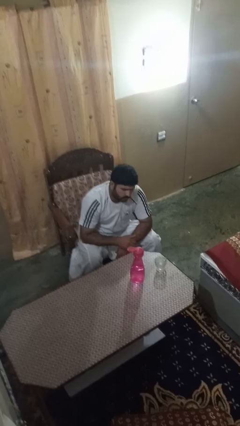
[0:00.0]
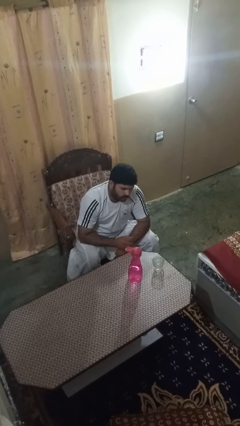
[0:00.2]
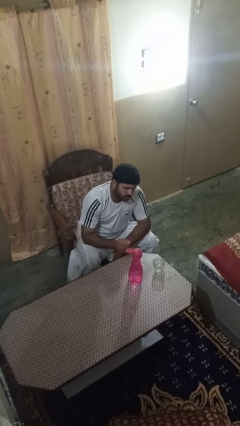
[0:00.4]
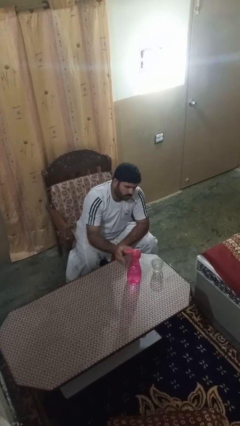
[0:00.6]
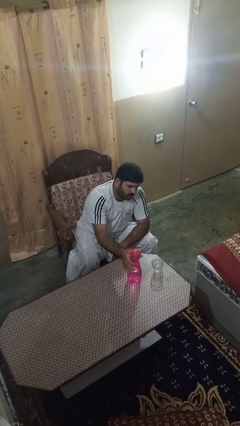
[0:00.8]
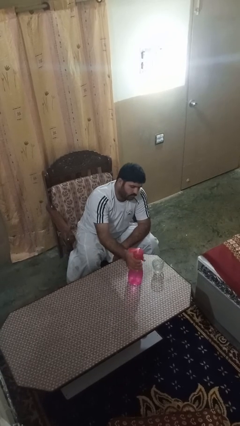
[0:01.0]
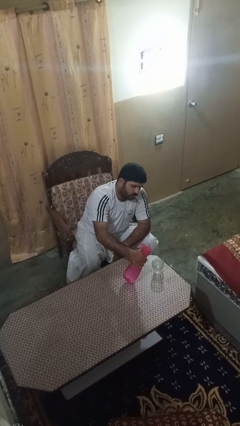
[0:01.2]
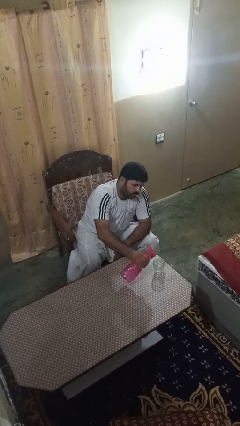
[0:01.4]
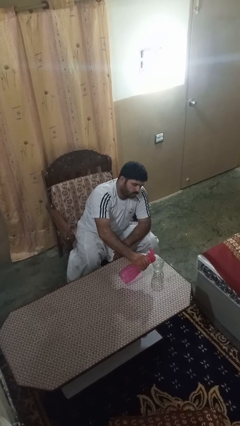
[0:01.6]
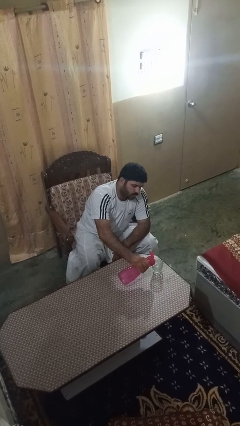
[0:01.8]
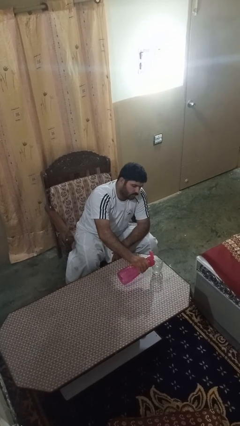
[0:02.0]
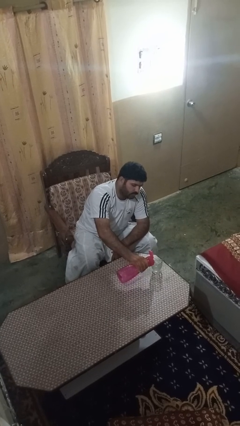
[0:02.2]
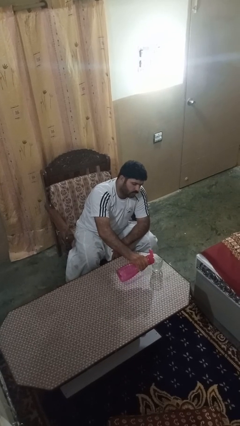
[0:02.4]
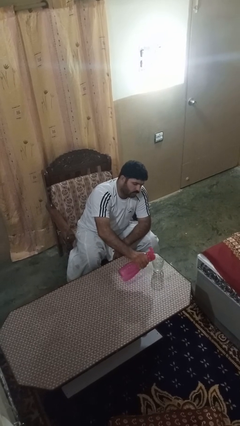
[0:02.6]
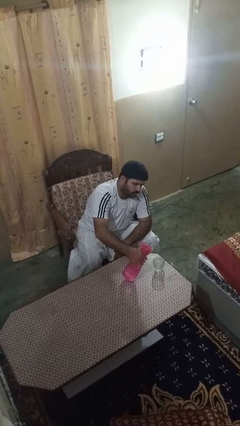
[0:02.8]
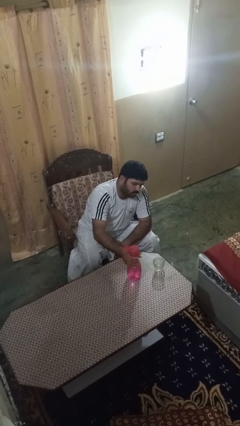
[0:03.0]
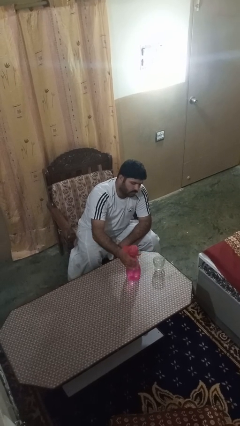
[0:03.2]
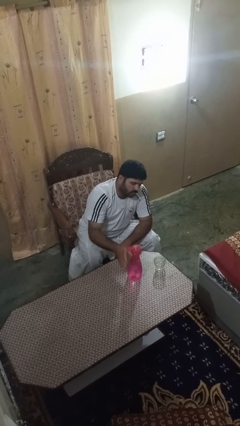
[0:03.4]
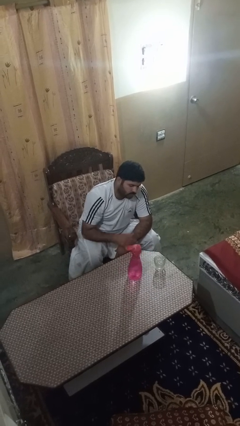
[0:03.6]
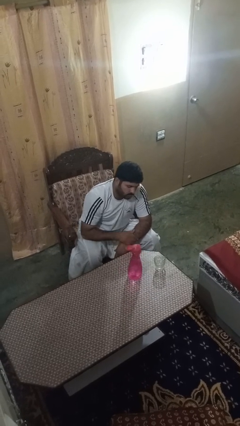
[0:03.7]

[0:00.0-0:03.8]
person pours liquid into cup

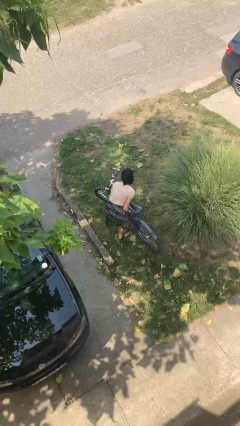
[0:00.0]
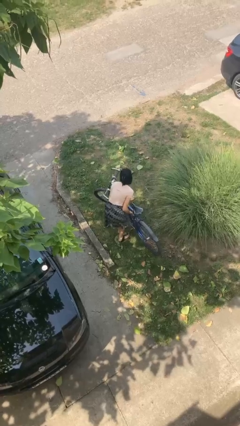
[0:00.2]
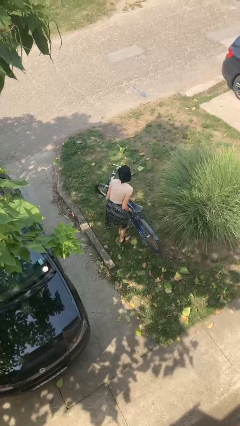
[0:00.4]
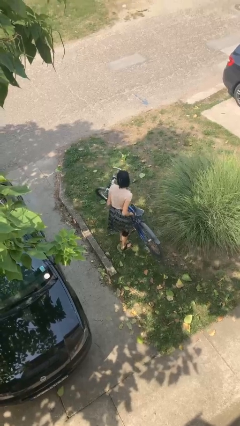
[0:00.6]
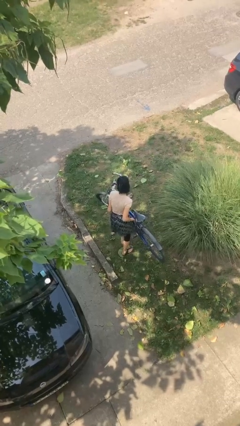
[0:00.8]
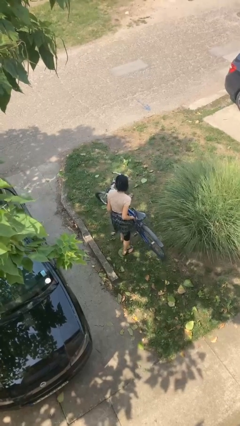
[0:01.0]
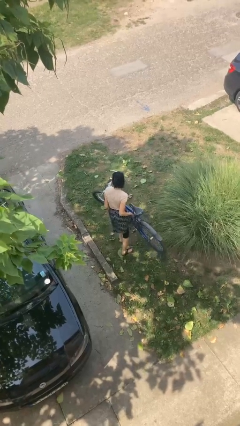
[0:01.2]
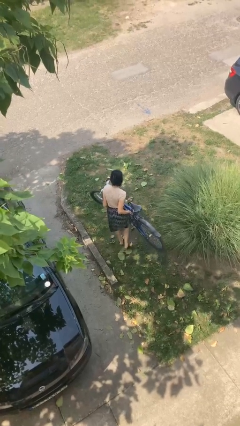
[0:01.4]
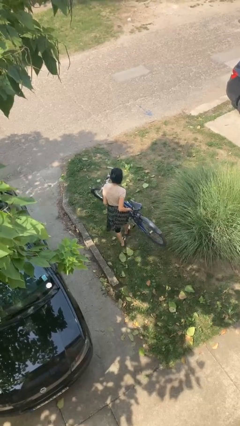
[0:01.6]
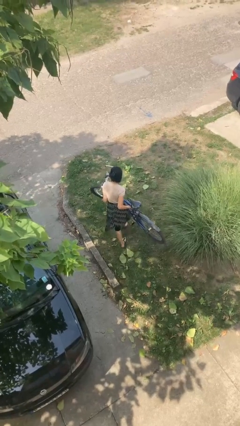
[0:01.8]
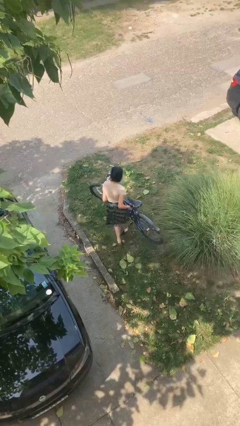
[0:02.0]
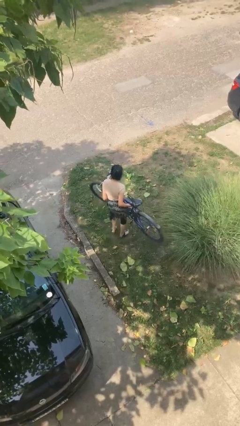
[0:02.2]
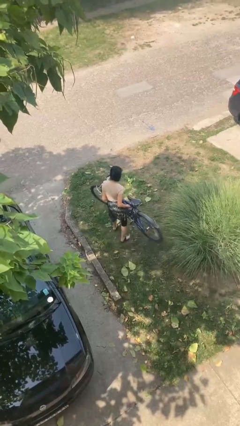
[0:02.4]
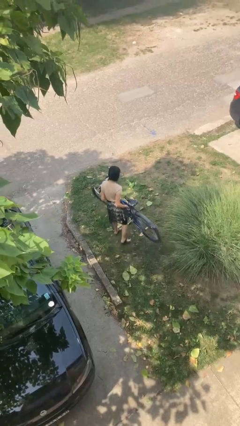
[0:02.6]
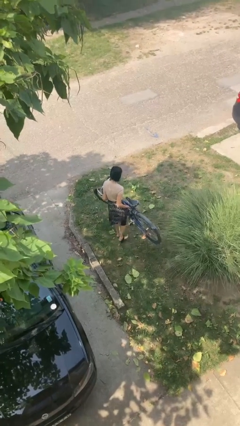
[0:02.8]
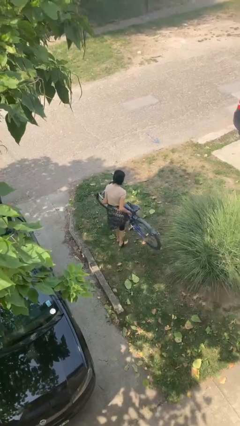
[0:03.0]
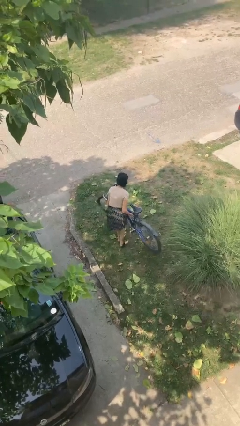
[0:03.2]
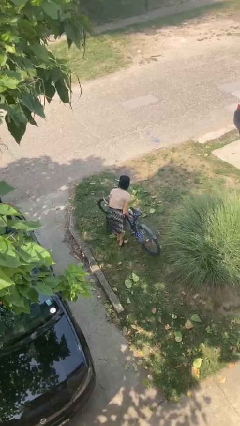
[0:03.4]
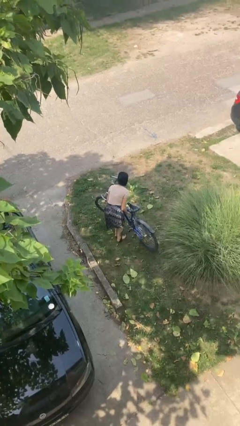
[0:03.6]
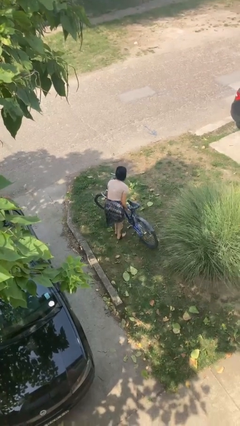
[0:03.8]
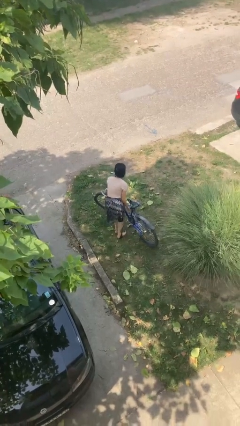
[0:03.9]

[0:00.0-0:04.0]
person carries bicycle

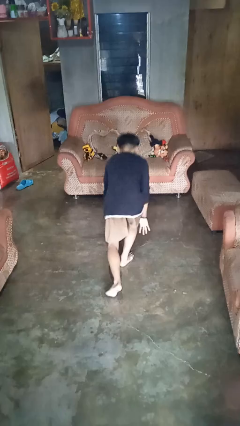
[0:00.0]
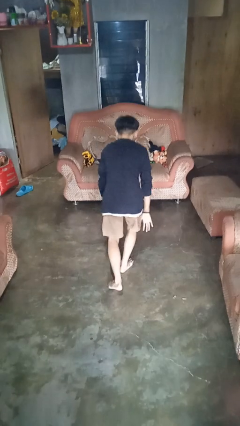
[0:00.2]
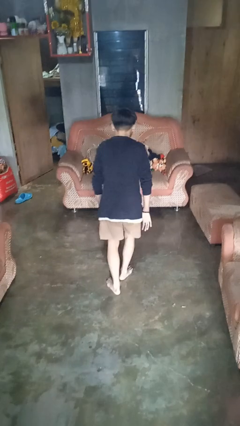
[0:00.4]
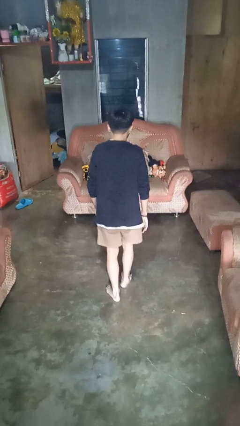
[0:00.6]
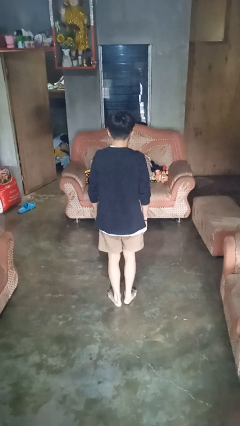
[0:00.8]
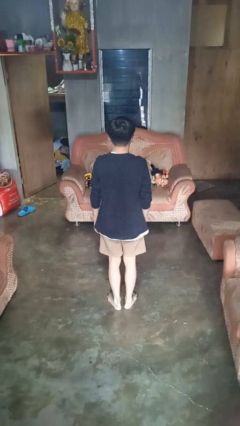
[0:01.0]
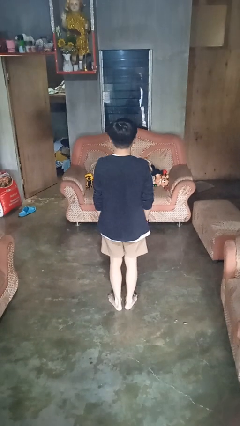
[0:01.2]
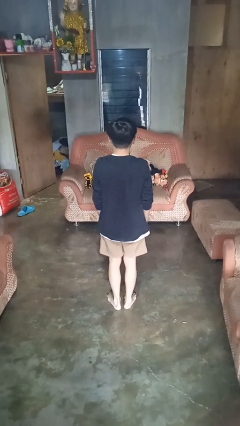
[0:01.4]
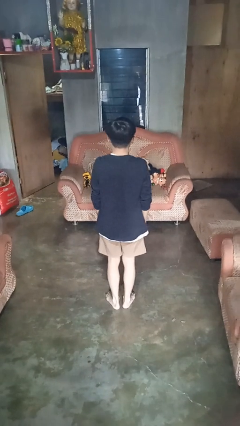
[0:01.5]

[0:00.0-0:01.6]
person stands up from floor

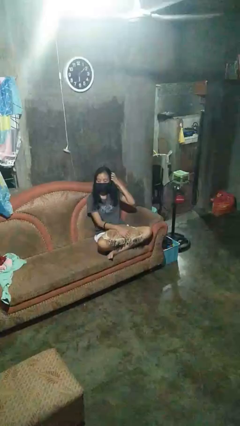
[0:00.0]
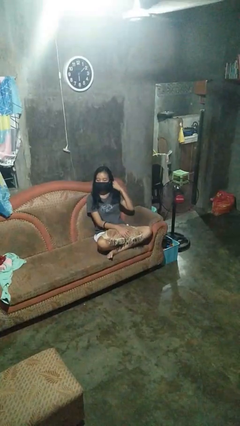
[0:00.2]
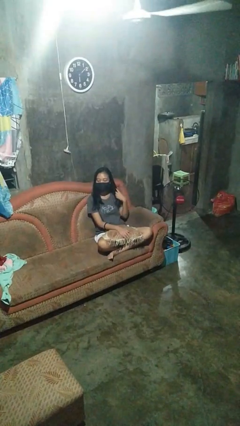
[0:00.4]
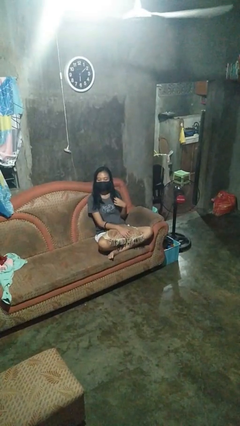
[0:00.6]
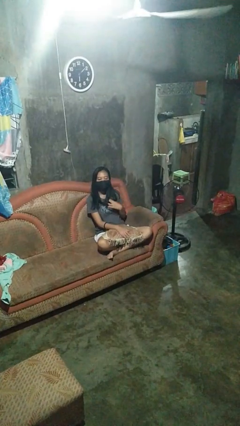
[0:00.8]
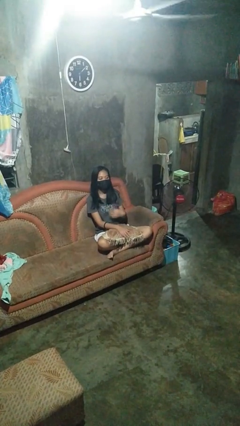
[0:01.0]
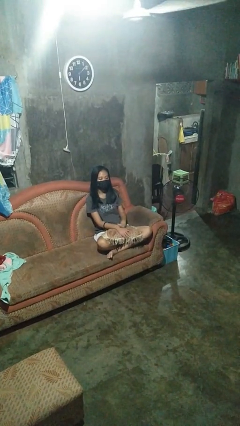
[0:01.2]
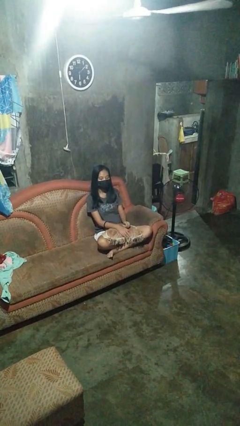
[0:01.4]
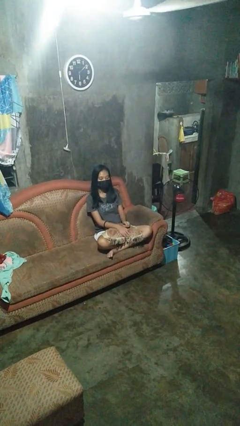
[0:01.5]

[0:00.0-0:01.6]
person strokes hair

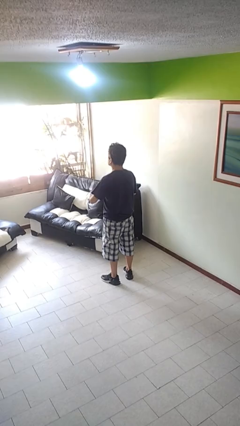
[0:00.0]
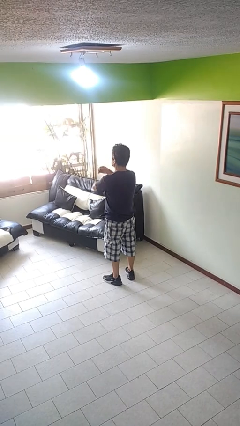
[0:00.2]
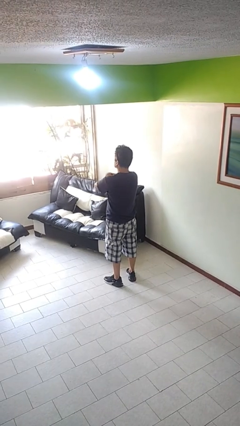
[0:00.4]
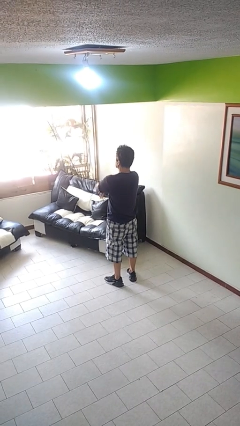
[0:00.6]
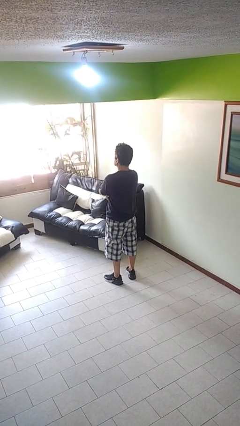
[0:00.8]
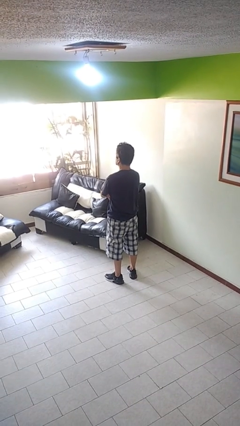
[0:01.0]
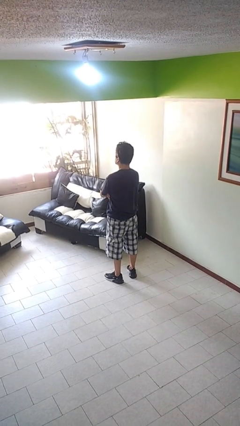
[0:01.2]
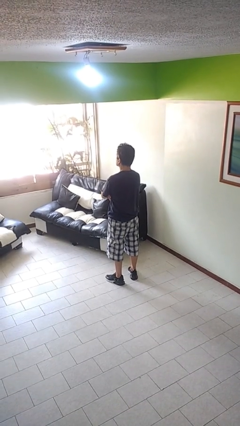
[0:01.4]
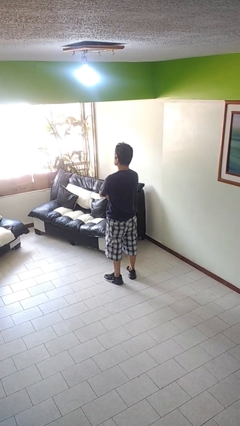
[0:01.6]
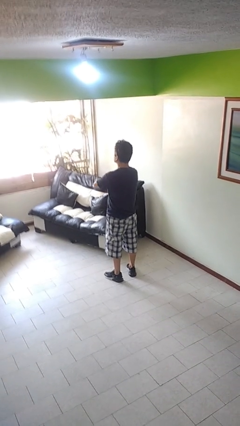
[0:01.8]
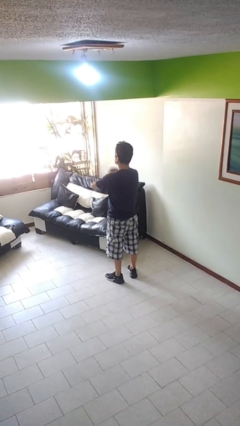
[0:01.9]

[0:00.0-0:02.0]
person crosses arms

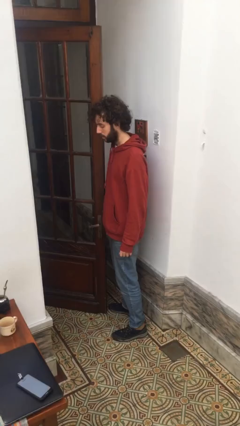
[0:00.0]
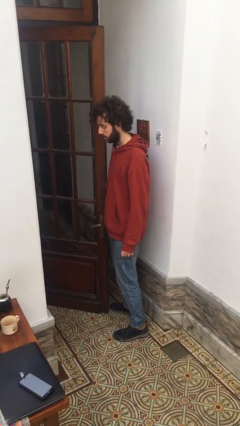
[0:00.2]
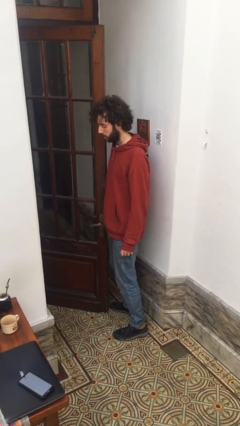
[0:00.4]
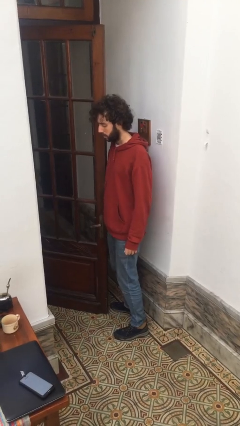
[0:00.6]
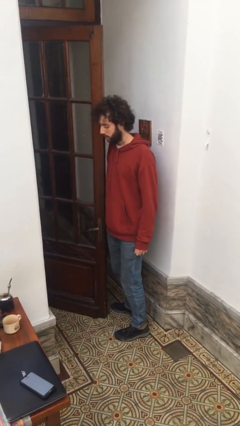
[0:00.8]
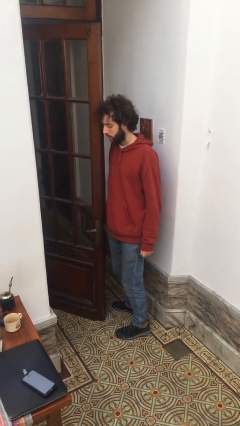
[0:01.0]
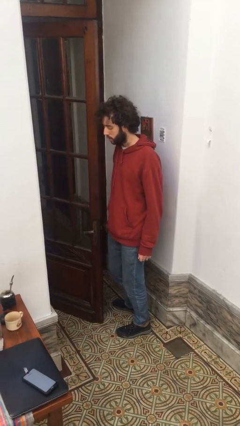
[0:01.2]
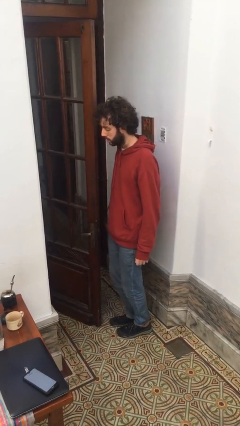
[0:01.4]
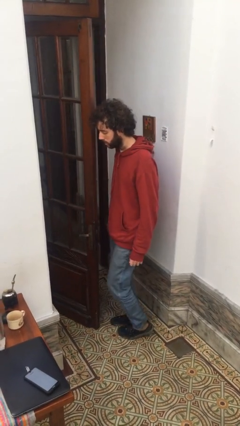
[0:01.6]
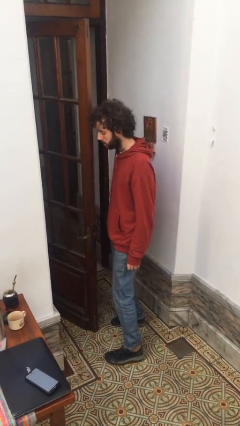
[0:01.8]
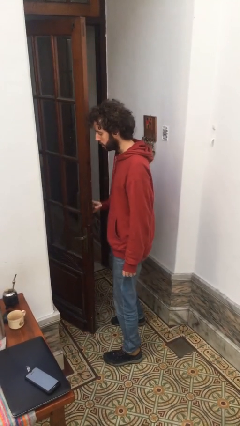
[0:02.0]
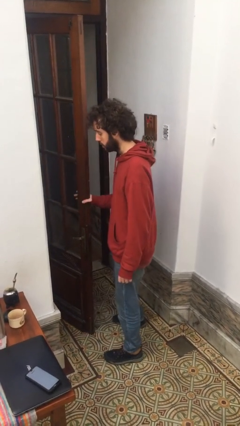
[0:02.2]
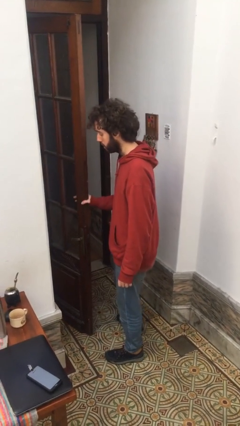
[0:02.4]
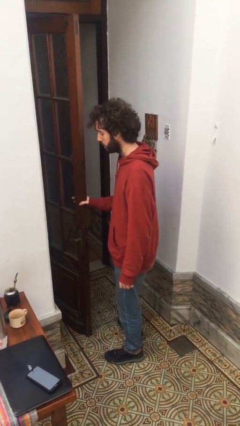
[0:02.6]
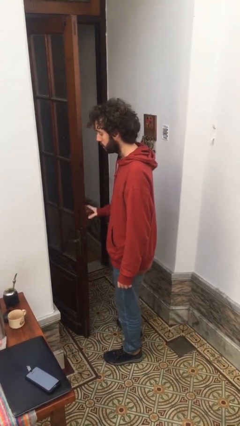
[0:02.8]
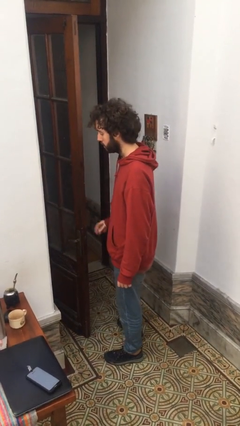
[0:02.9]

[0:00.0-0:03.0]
person opens facility door

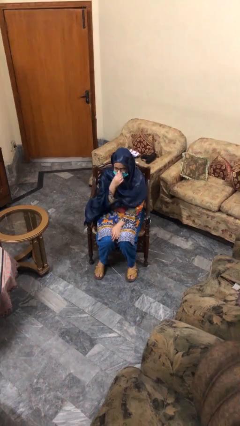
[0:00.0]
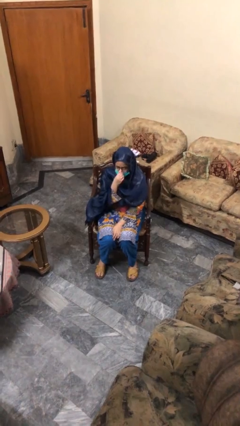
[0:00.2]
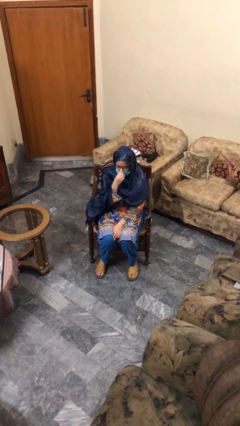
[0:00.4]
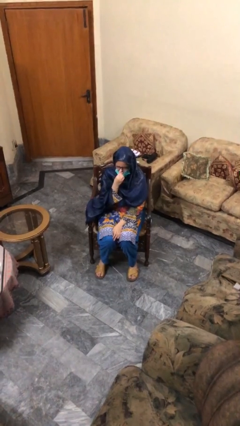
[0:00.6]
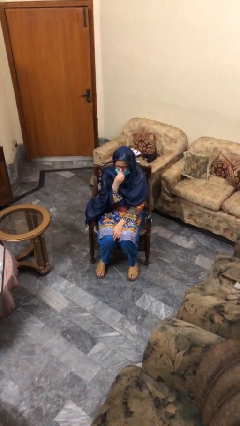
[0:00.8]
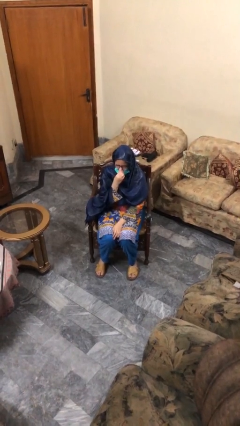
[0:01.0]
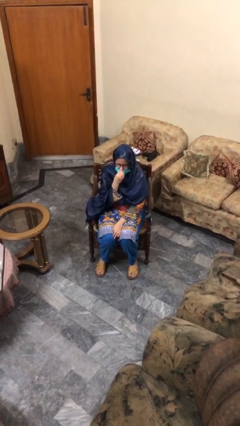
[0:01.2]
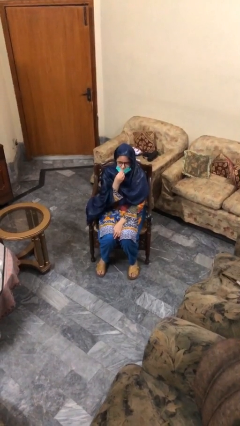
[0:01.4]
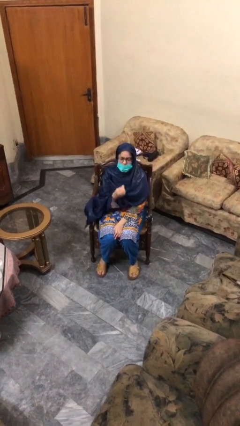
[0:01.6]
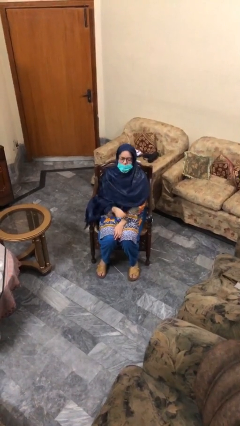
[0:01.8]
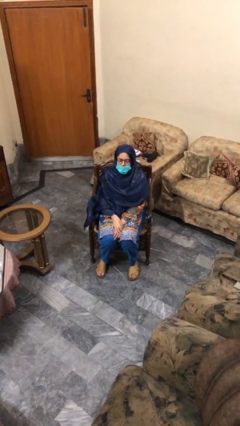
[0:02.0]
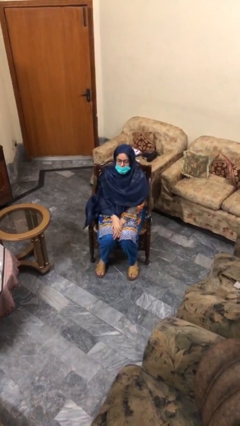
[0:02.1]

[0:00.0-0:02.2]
person blows nose
